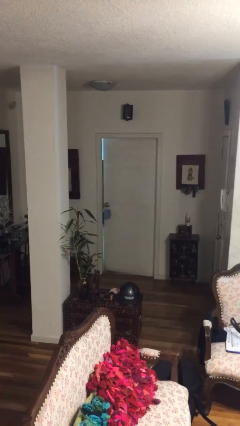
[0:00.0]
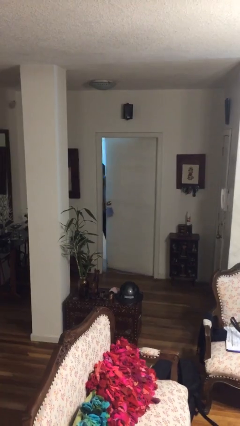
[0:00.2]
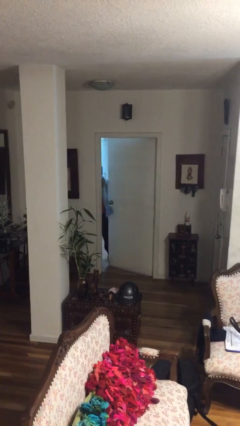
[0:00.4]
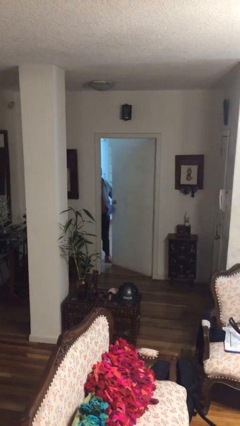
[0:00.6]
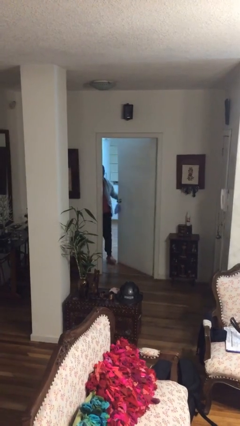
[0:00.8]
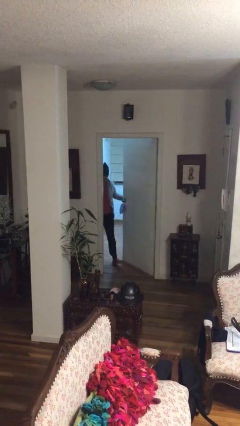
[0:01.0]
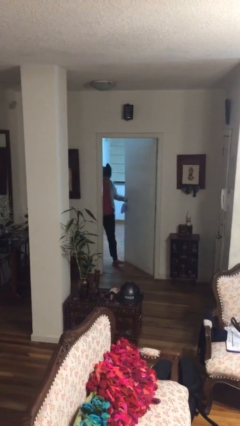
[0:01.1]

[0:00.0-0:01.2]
person opens facility door

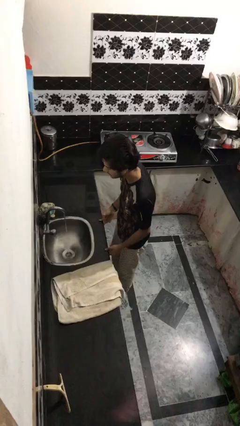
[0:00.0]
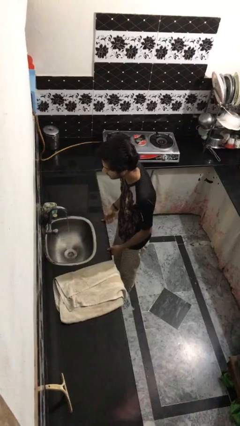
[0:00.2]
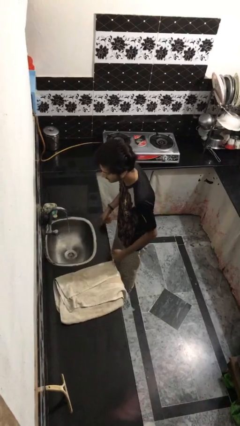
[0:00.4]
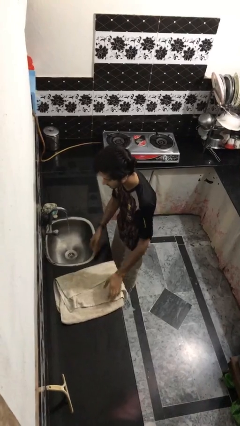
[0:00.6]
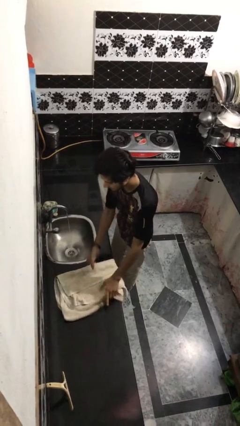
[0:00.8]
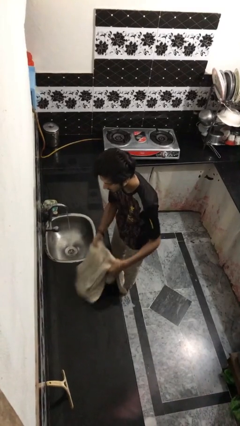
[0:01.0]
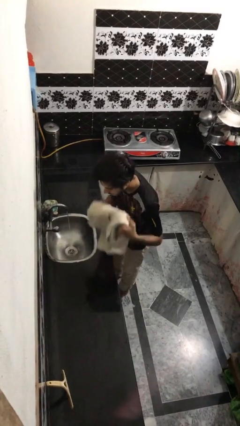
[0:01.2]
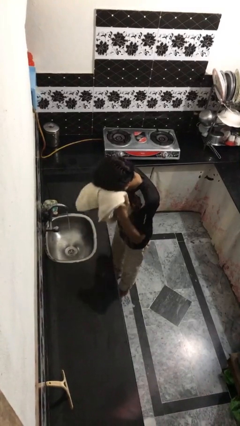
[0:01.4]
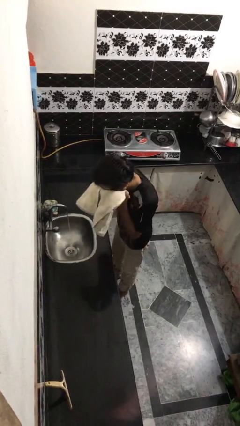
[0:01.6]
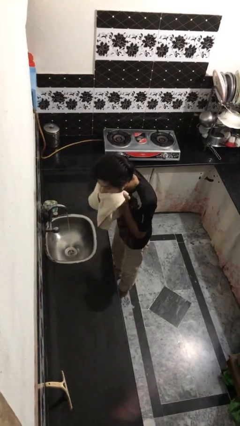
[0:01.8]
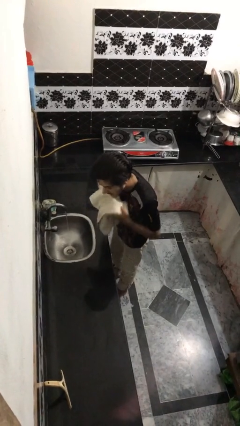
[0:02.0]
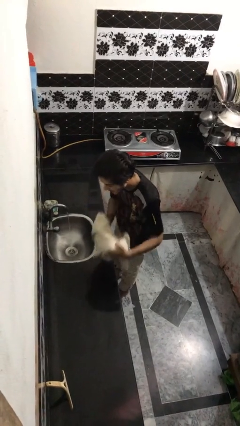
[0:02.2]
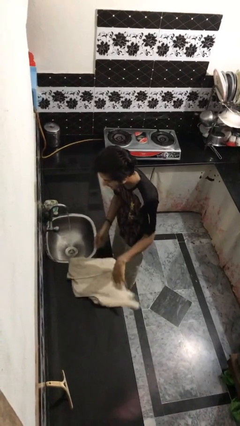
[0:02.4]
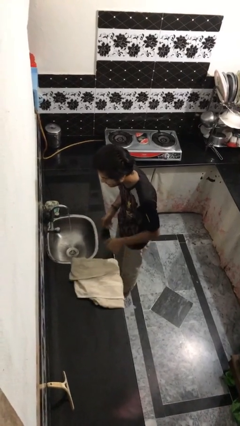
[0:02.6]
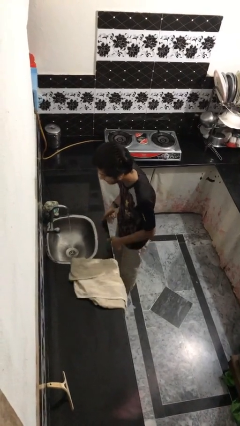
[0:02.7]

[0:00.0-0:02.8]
person dries face with towel

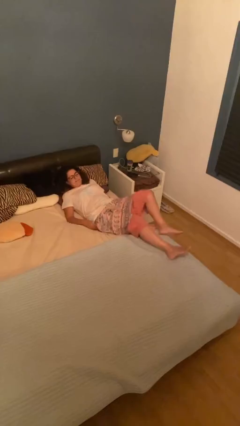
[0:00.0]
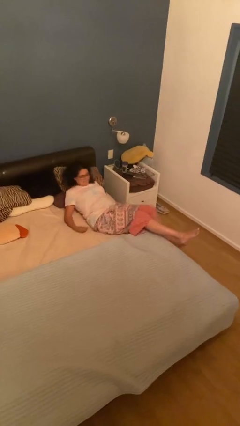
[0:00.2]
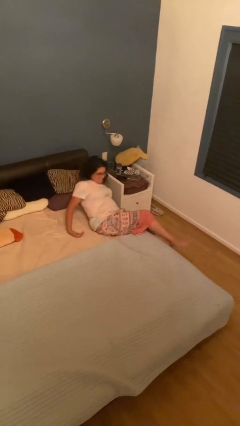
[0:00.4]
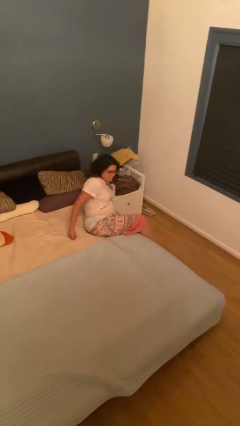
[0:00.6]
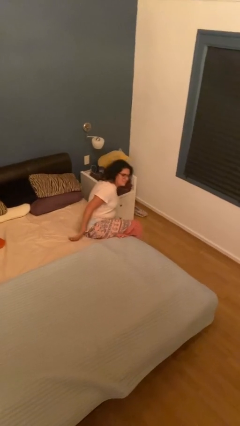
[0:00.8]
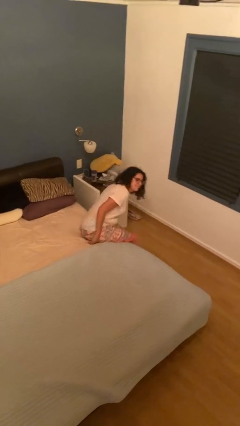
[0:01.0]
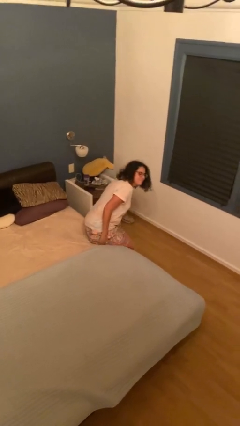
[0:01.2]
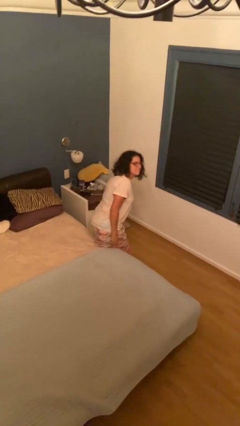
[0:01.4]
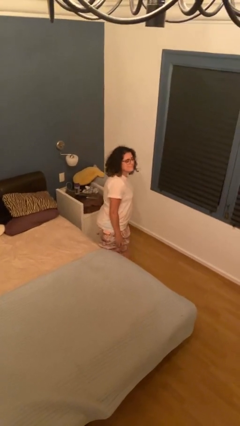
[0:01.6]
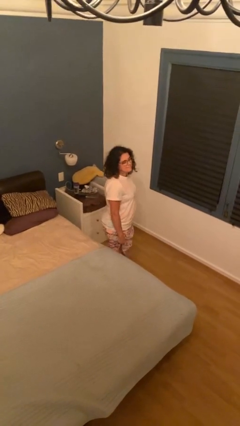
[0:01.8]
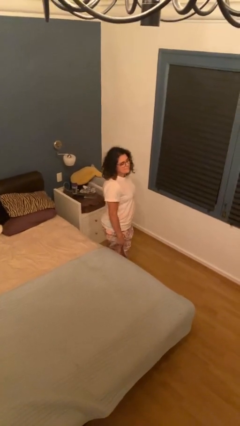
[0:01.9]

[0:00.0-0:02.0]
person stands up

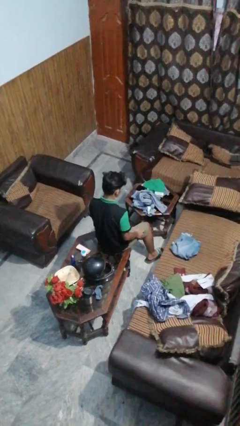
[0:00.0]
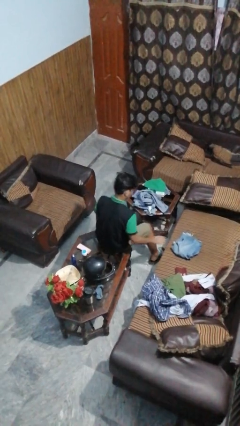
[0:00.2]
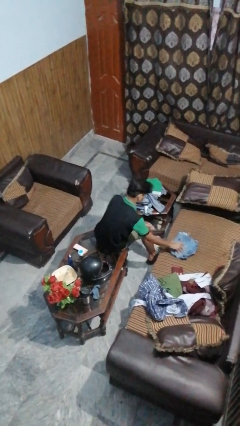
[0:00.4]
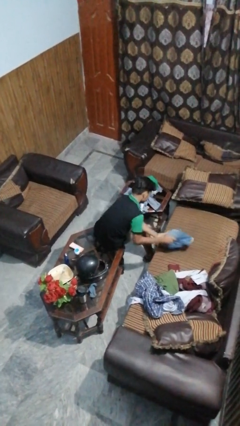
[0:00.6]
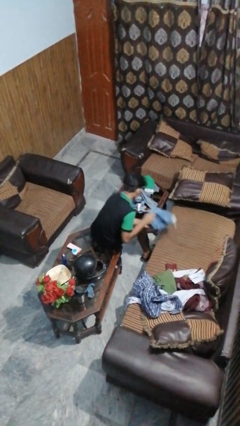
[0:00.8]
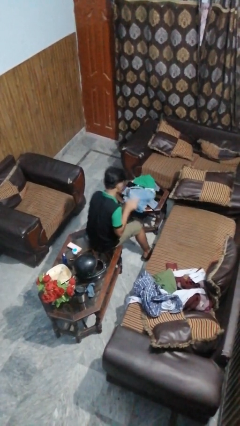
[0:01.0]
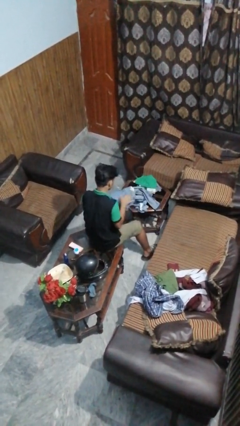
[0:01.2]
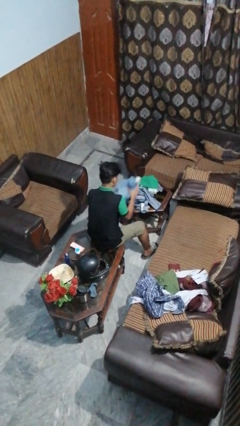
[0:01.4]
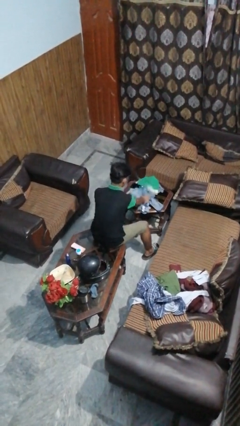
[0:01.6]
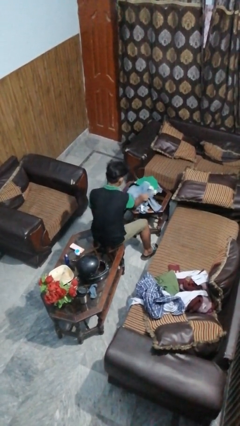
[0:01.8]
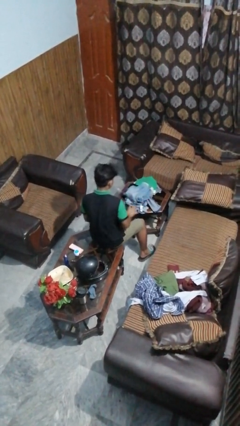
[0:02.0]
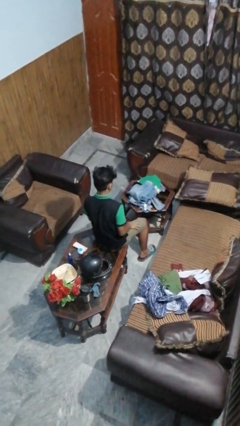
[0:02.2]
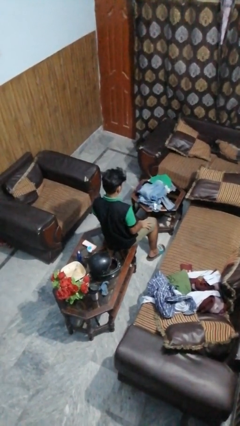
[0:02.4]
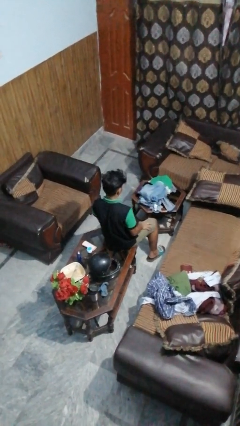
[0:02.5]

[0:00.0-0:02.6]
person folds pants

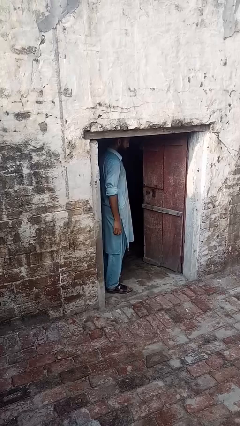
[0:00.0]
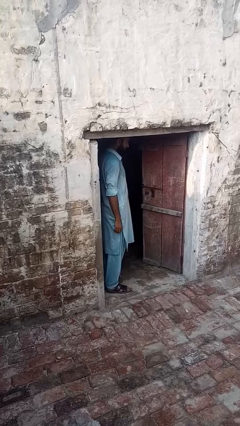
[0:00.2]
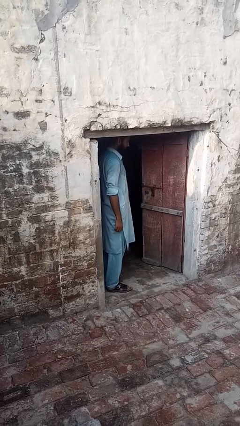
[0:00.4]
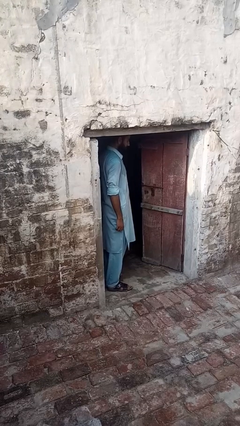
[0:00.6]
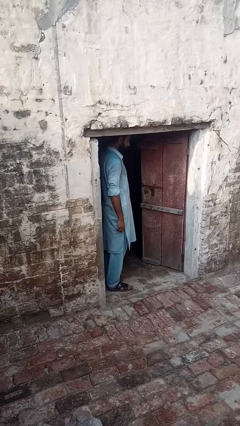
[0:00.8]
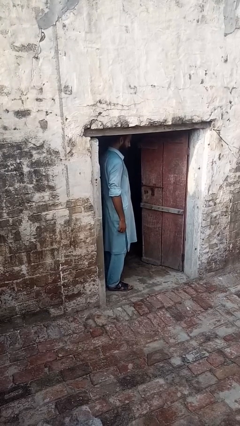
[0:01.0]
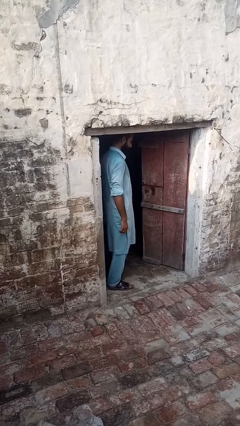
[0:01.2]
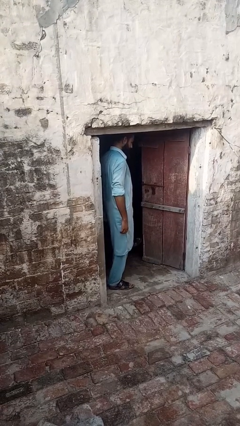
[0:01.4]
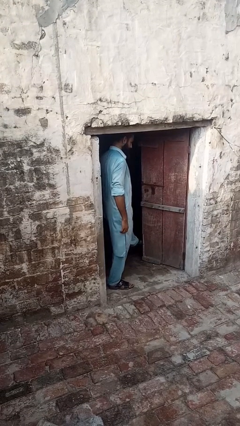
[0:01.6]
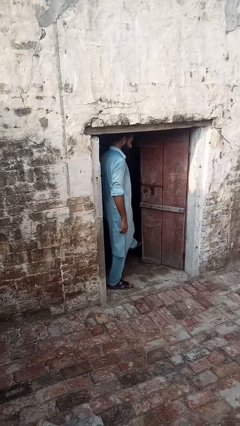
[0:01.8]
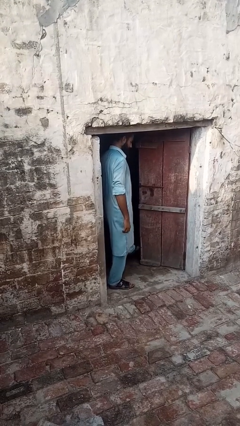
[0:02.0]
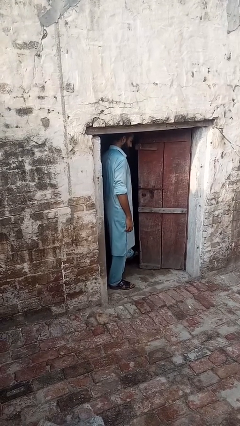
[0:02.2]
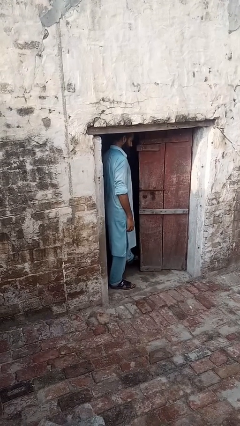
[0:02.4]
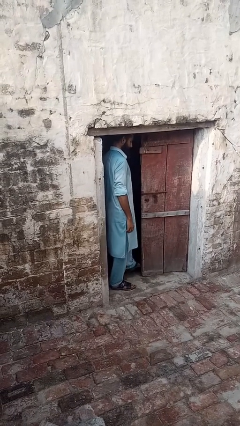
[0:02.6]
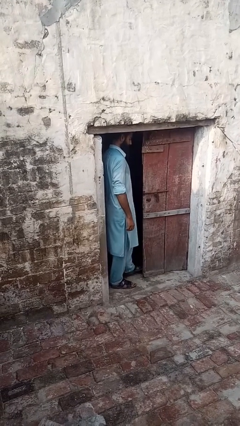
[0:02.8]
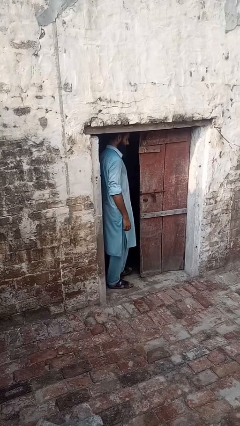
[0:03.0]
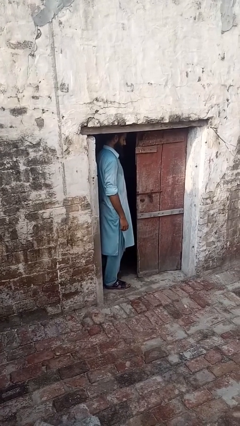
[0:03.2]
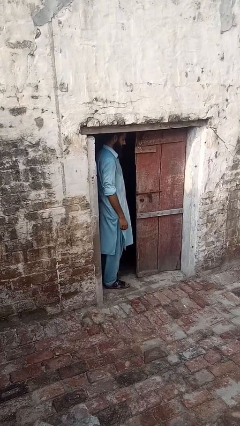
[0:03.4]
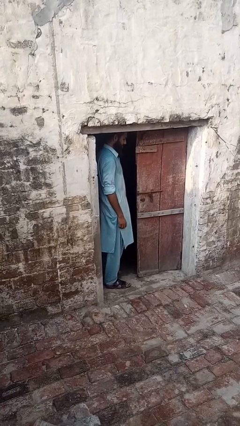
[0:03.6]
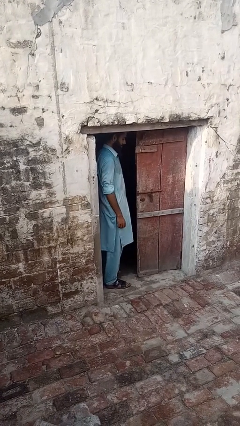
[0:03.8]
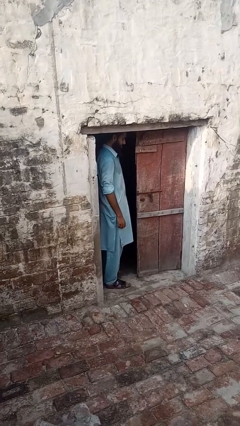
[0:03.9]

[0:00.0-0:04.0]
person closes door with foot

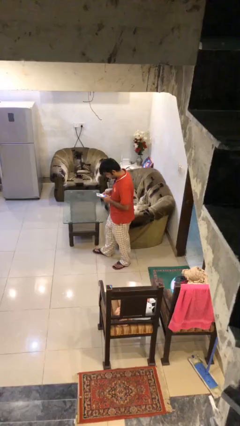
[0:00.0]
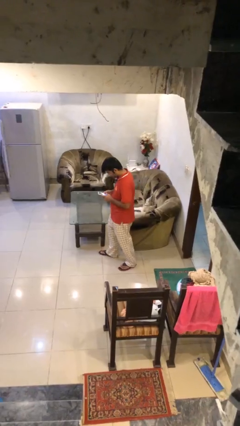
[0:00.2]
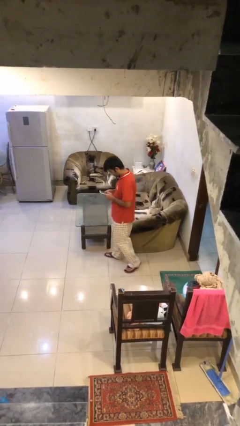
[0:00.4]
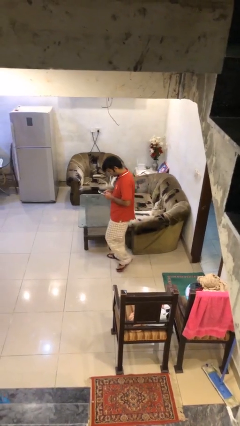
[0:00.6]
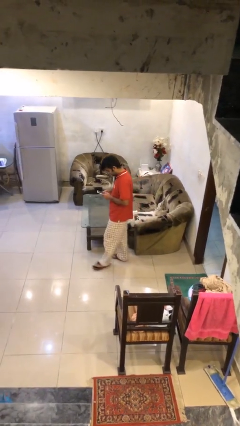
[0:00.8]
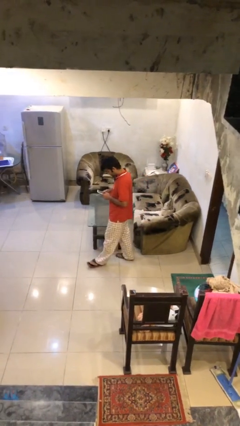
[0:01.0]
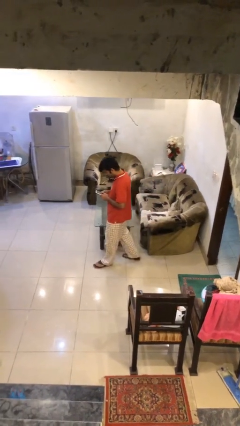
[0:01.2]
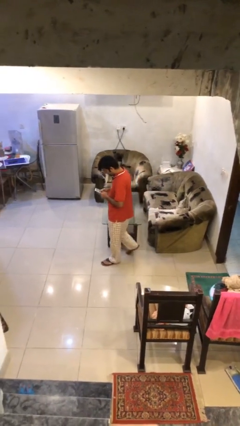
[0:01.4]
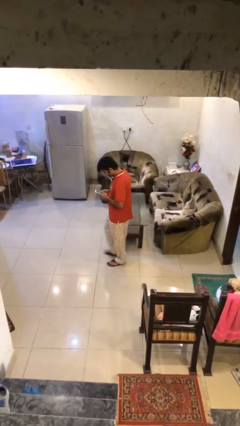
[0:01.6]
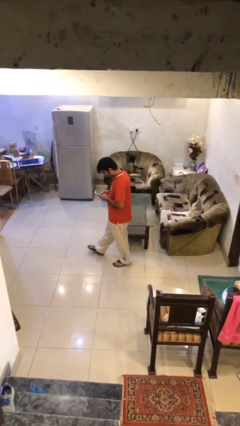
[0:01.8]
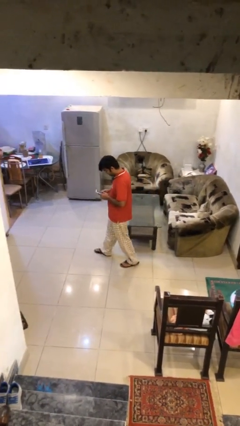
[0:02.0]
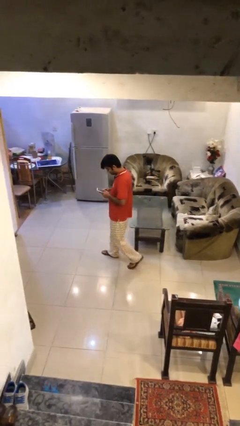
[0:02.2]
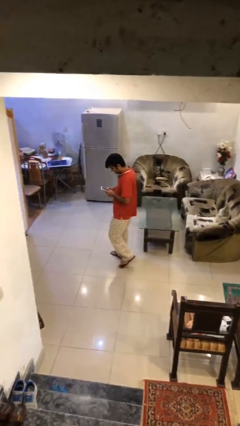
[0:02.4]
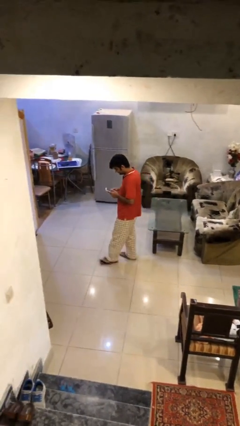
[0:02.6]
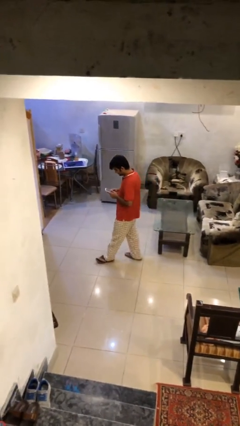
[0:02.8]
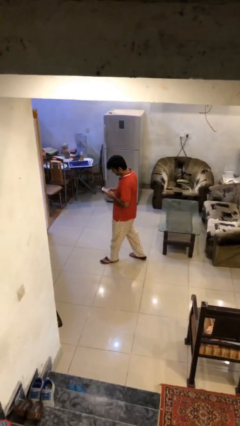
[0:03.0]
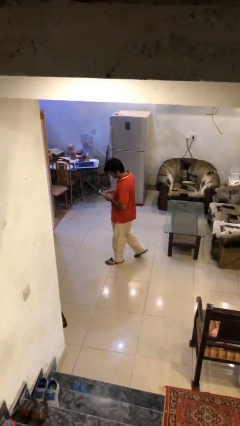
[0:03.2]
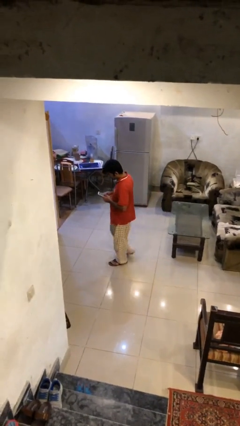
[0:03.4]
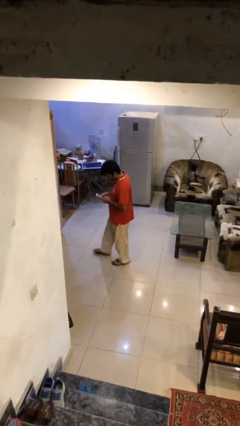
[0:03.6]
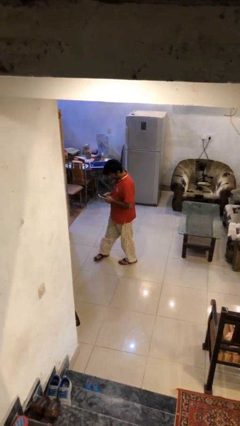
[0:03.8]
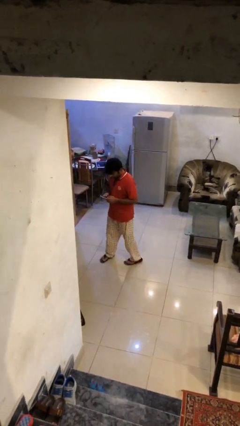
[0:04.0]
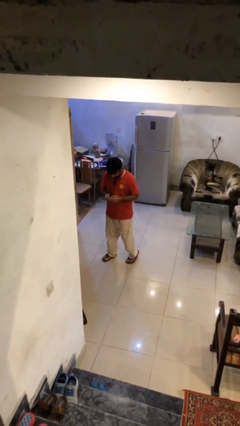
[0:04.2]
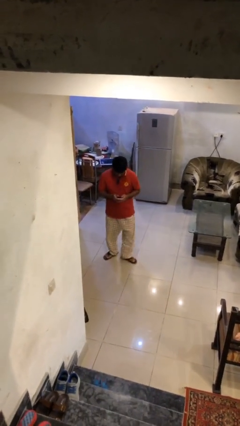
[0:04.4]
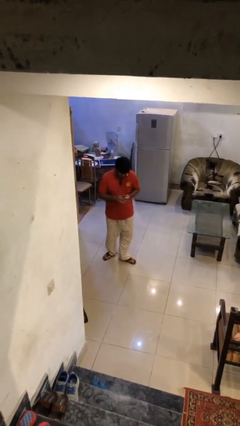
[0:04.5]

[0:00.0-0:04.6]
person texts on phone
